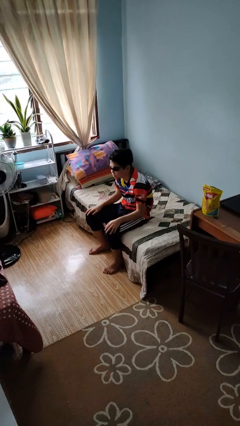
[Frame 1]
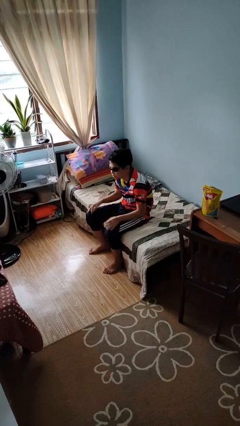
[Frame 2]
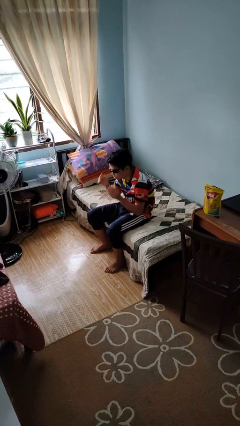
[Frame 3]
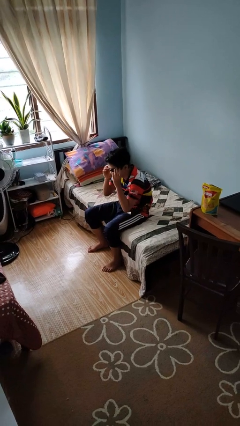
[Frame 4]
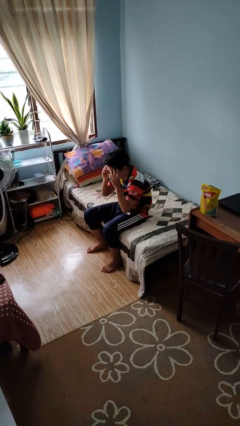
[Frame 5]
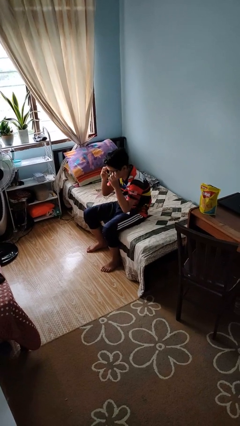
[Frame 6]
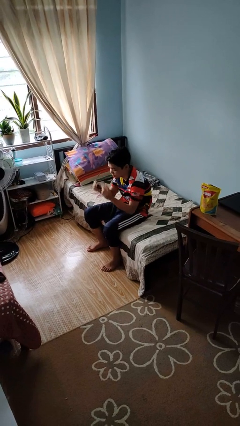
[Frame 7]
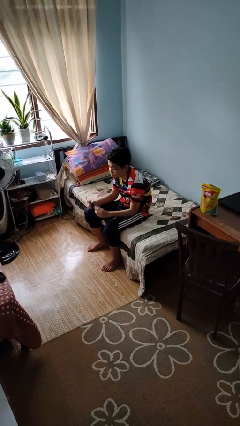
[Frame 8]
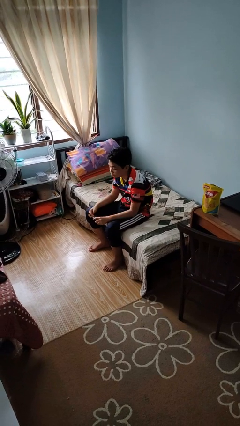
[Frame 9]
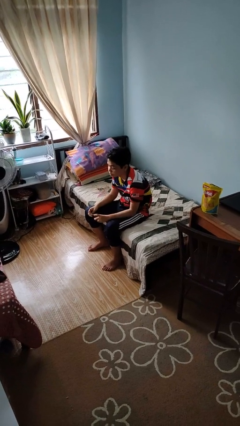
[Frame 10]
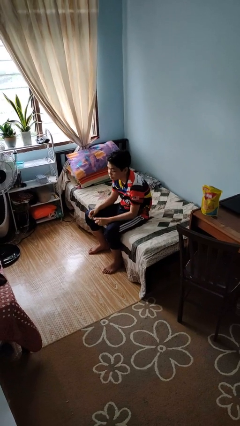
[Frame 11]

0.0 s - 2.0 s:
person takes off glasses

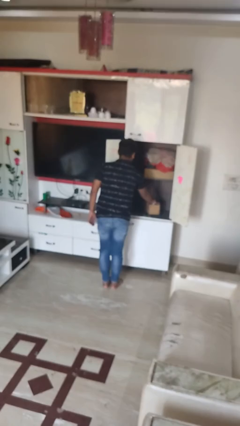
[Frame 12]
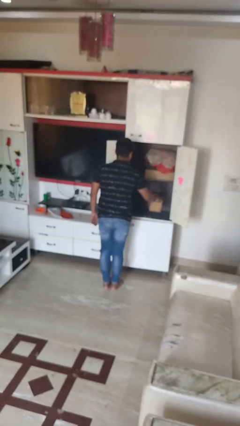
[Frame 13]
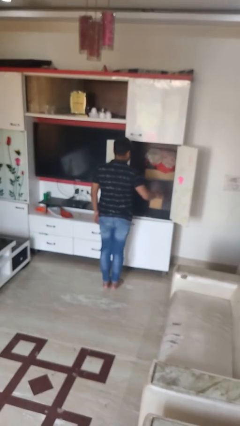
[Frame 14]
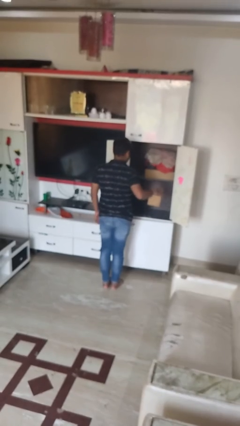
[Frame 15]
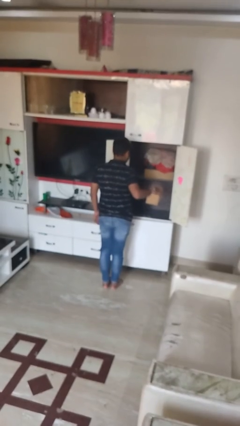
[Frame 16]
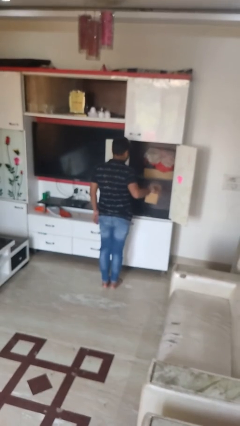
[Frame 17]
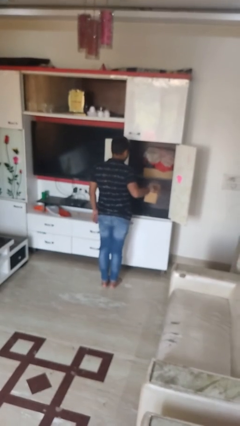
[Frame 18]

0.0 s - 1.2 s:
person picks up object from cabinet

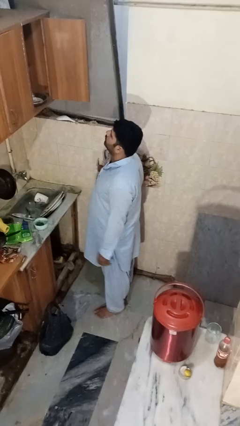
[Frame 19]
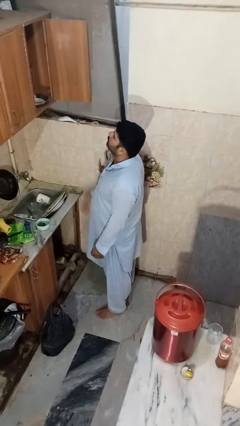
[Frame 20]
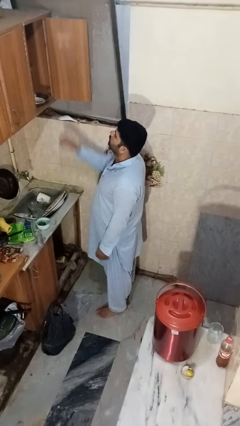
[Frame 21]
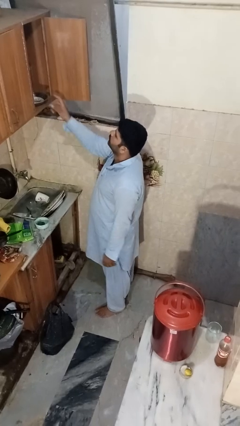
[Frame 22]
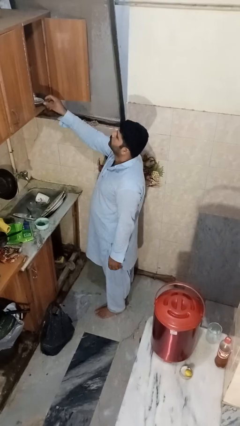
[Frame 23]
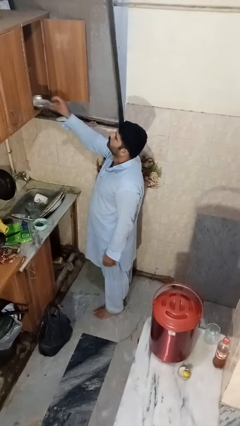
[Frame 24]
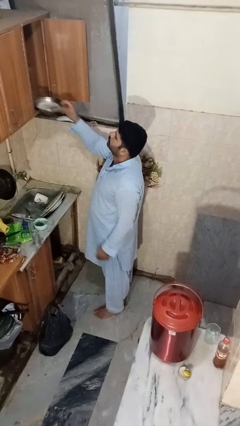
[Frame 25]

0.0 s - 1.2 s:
person takes object from cabinet

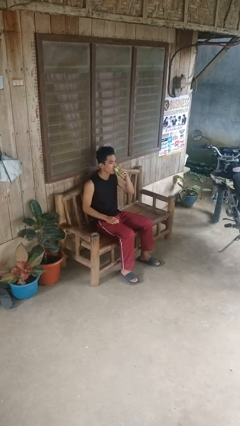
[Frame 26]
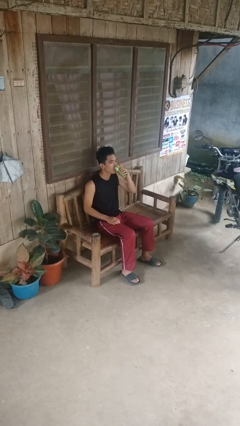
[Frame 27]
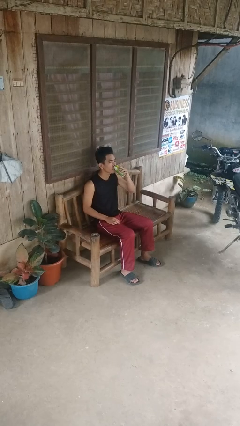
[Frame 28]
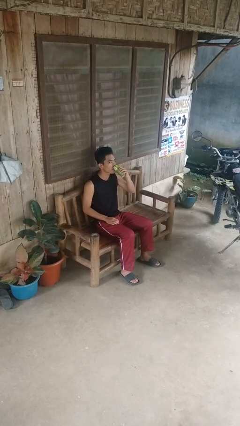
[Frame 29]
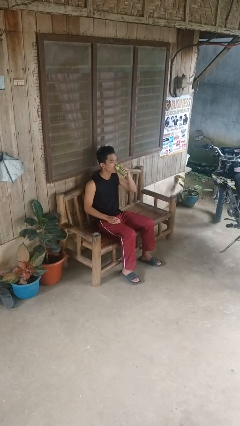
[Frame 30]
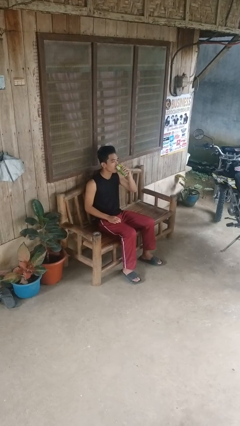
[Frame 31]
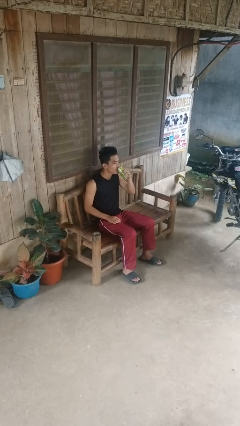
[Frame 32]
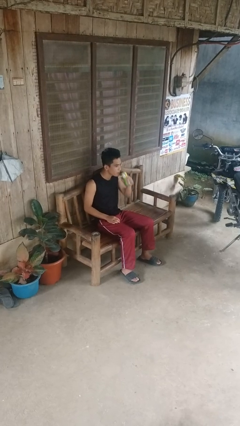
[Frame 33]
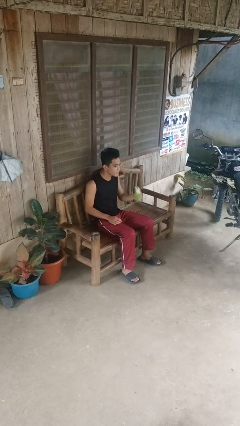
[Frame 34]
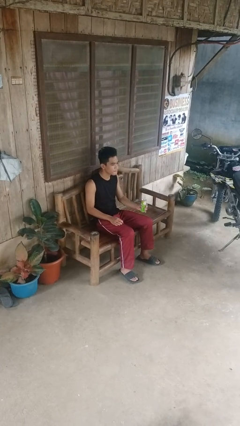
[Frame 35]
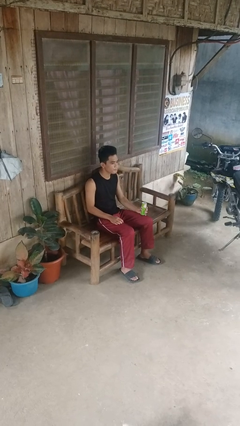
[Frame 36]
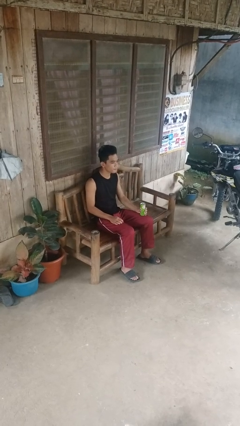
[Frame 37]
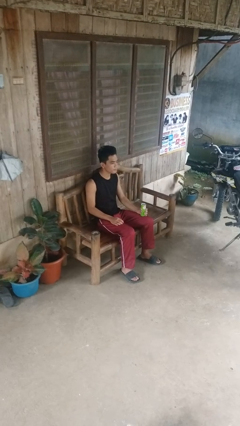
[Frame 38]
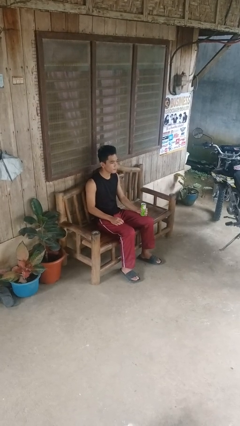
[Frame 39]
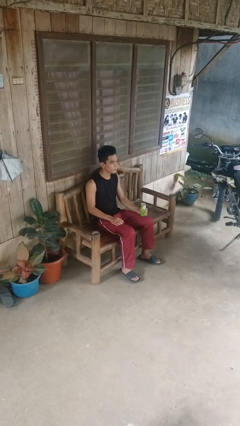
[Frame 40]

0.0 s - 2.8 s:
person drinks from beverage can

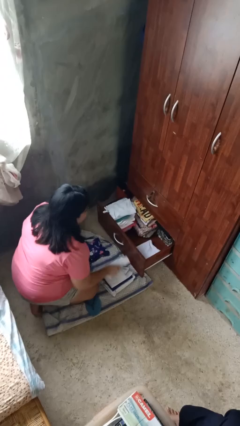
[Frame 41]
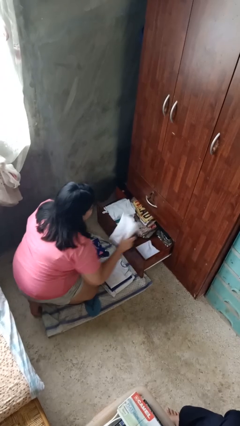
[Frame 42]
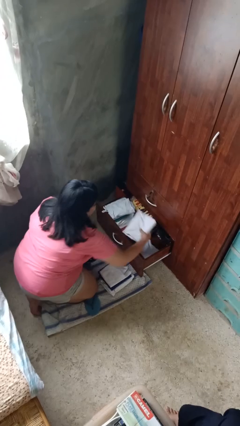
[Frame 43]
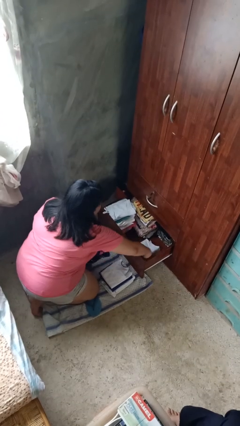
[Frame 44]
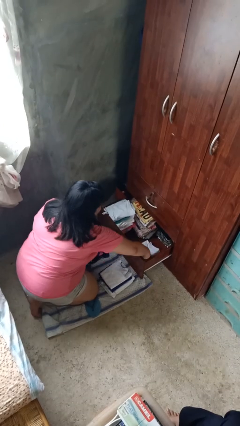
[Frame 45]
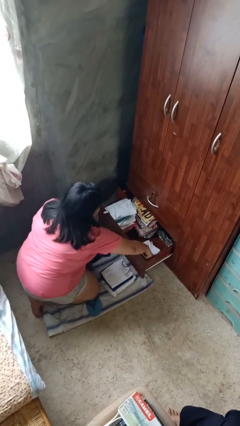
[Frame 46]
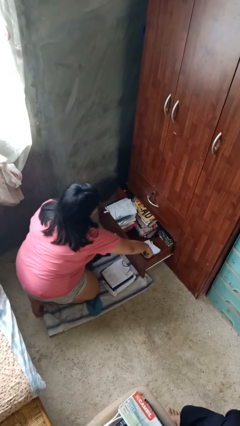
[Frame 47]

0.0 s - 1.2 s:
person puts clothes into dresser

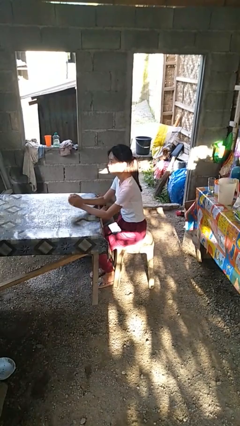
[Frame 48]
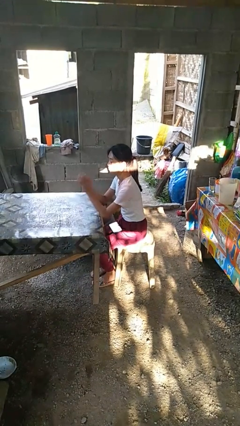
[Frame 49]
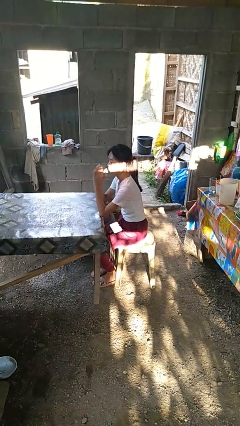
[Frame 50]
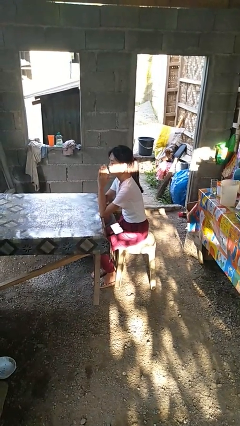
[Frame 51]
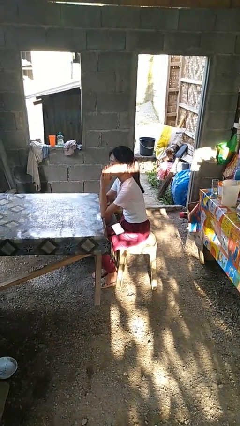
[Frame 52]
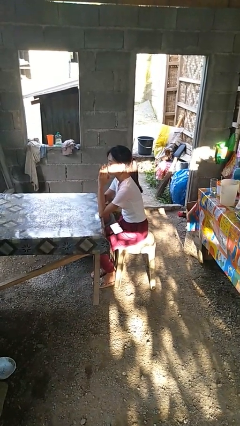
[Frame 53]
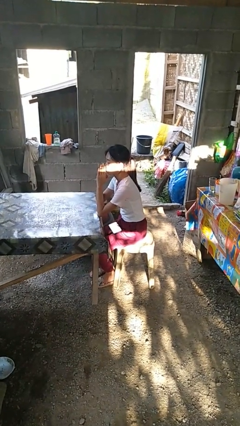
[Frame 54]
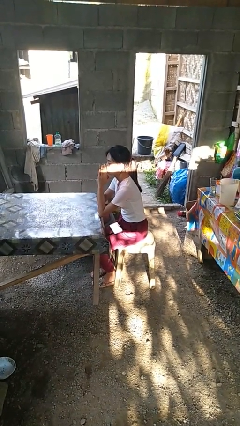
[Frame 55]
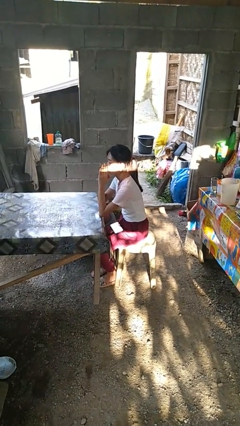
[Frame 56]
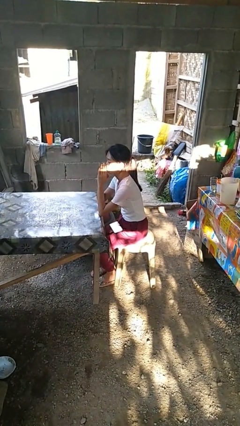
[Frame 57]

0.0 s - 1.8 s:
person prays

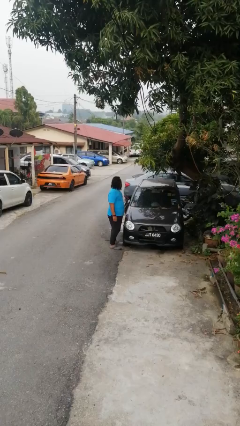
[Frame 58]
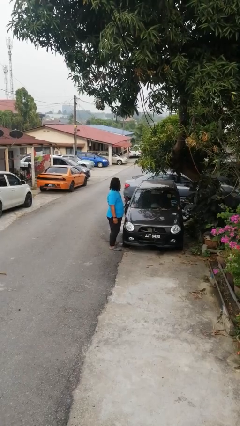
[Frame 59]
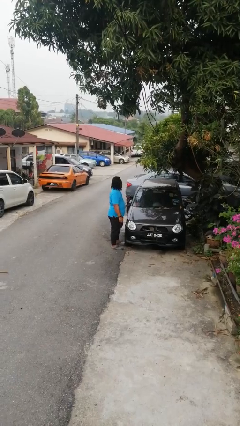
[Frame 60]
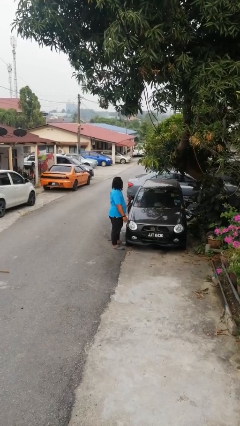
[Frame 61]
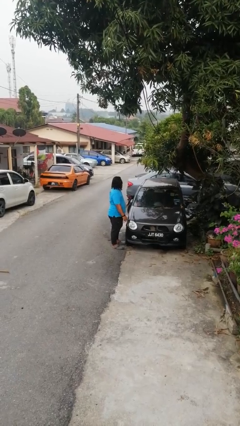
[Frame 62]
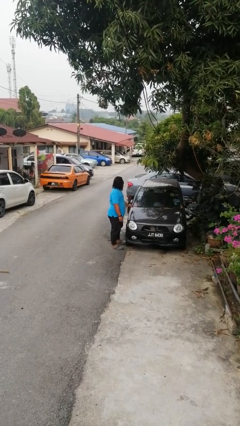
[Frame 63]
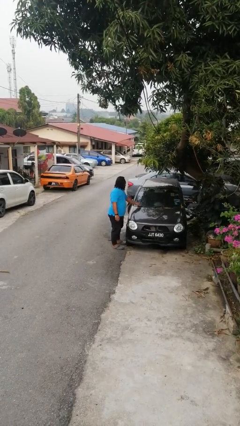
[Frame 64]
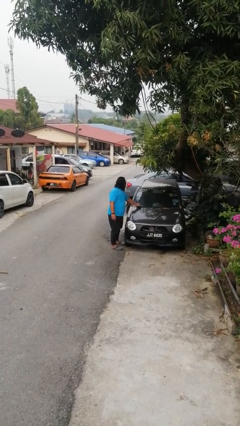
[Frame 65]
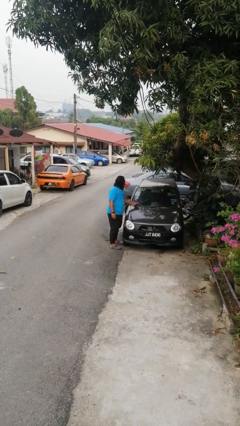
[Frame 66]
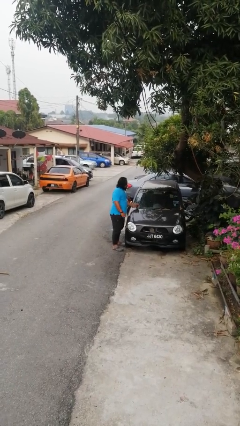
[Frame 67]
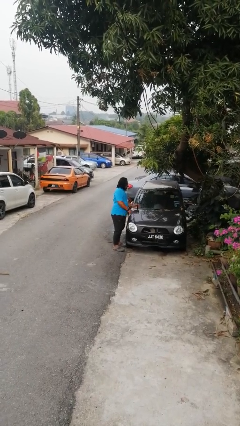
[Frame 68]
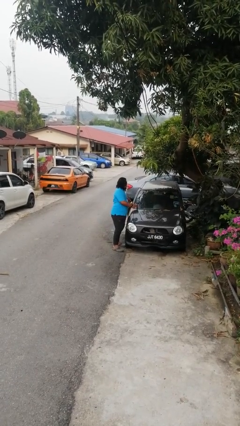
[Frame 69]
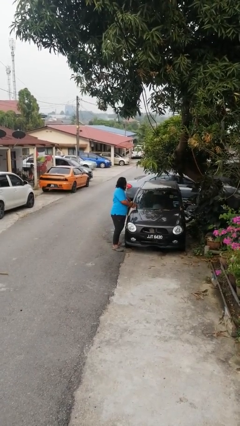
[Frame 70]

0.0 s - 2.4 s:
person flips up car wipers

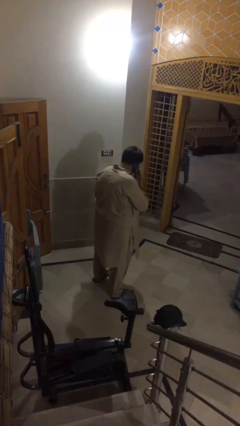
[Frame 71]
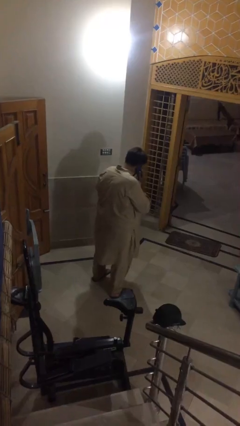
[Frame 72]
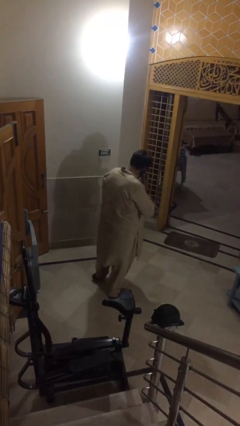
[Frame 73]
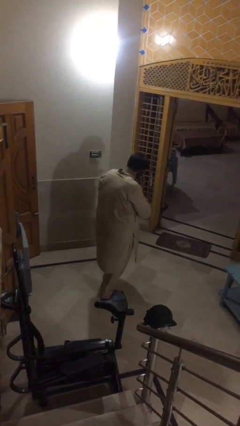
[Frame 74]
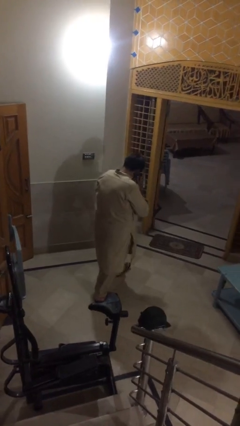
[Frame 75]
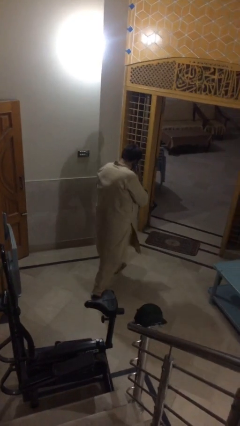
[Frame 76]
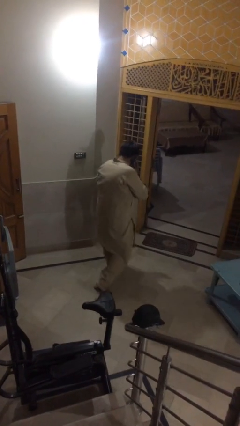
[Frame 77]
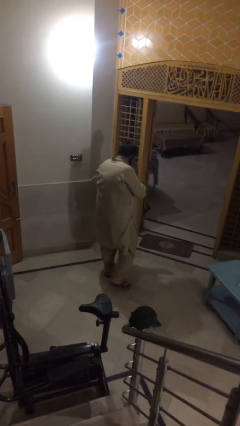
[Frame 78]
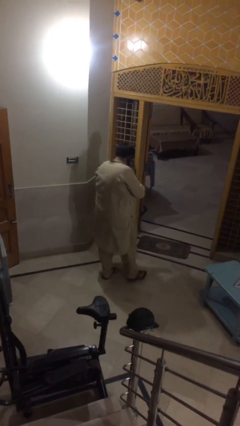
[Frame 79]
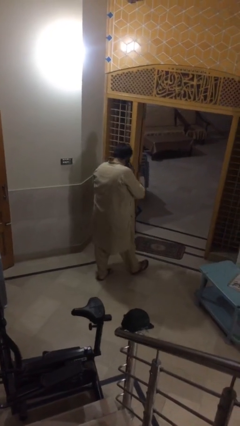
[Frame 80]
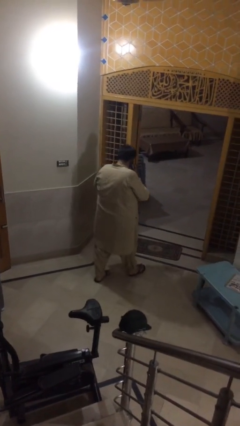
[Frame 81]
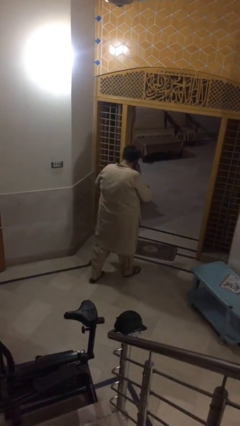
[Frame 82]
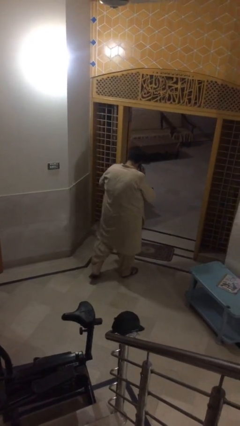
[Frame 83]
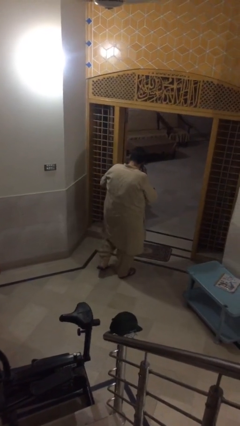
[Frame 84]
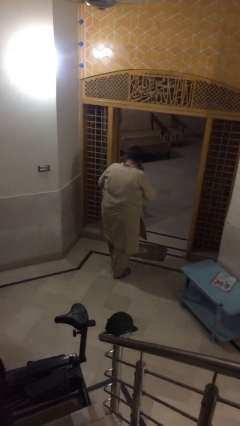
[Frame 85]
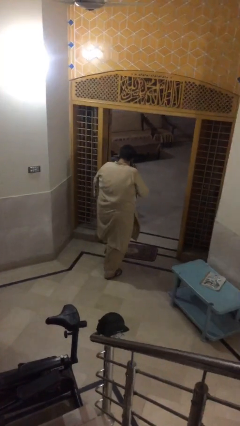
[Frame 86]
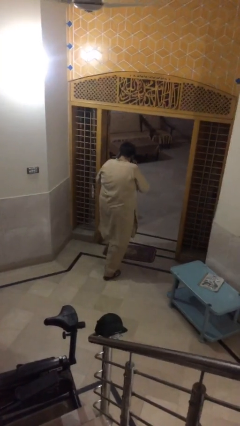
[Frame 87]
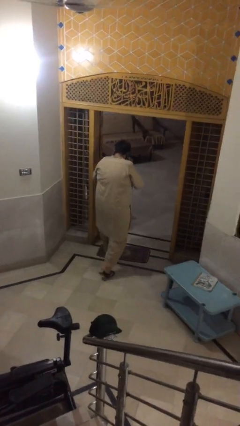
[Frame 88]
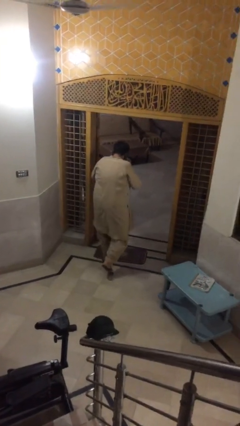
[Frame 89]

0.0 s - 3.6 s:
person exits scene through structure

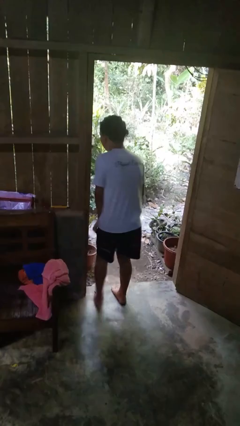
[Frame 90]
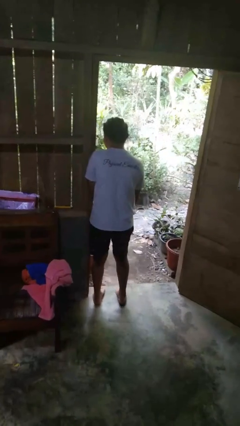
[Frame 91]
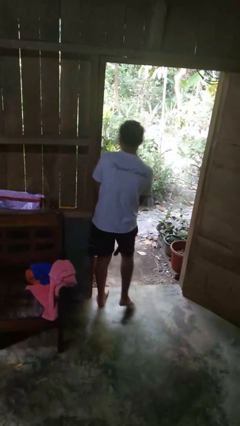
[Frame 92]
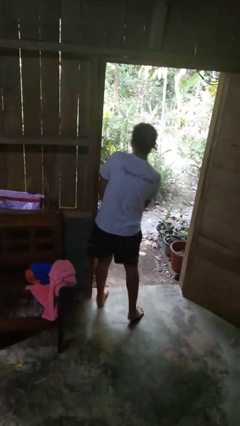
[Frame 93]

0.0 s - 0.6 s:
person bumps into wall
